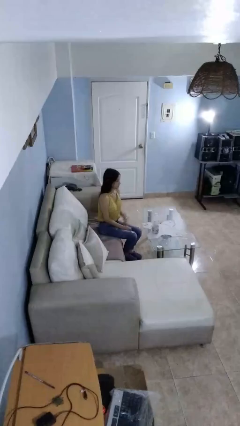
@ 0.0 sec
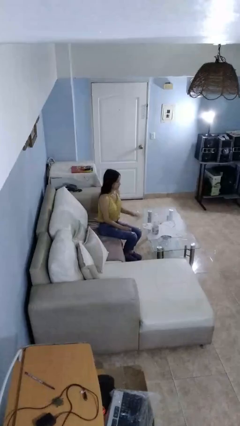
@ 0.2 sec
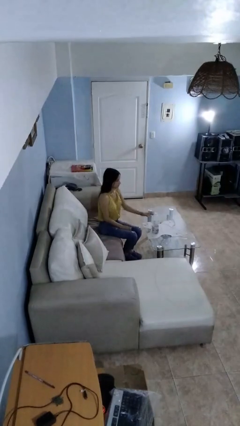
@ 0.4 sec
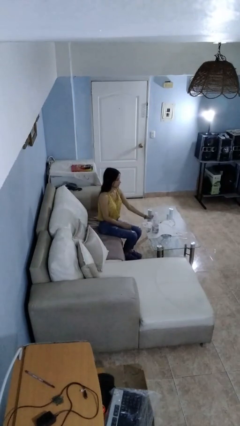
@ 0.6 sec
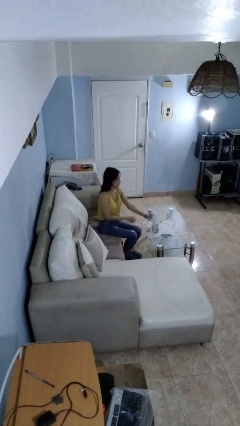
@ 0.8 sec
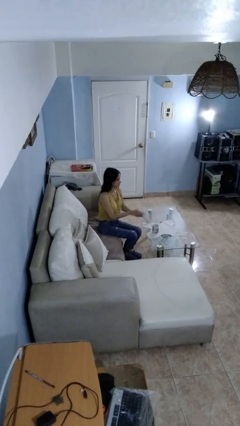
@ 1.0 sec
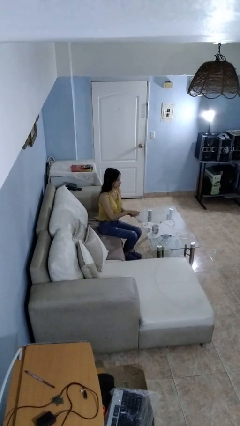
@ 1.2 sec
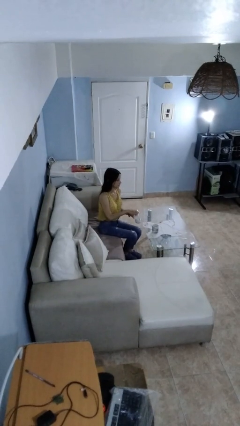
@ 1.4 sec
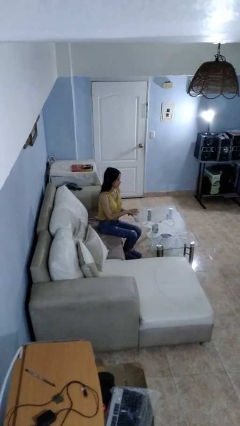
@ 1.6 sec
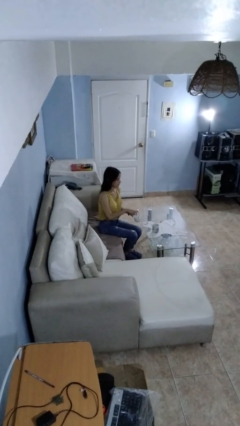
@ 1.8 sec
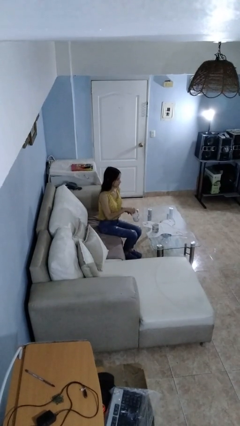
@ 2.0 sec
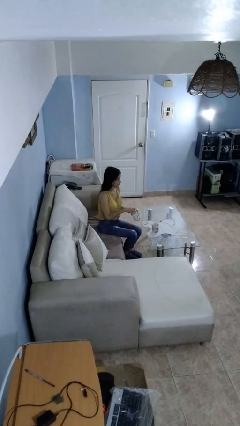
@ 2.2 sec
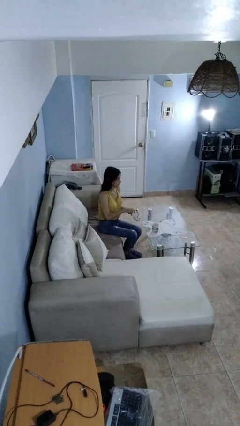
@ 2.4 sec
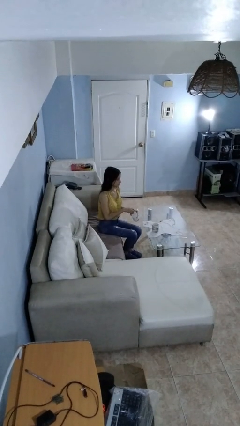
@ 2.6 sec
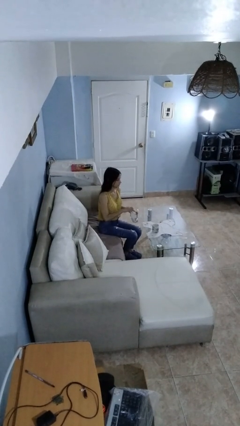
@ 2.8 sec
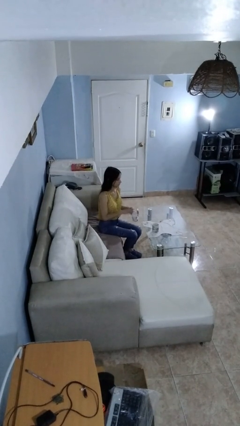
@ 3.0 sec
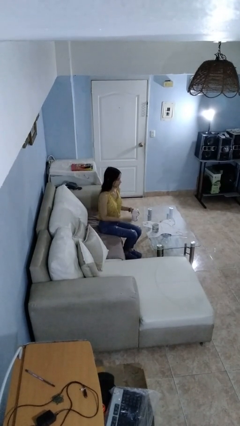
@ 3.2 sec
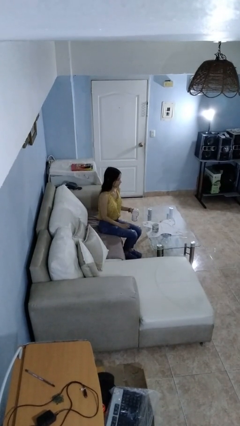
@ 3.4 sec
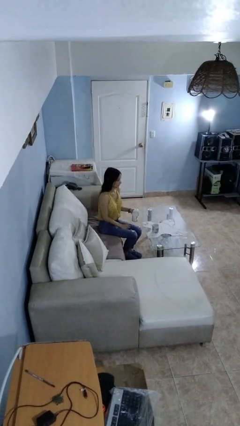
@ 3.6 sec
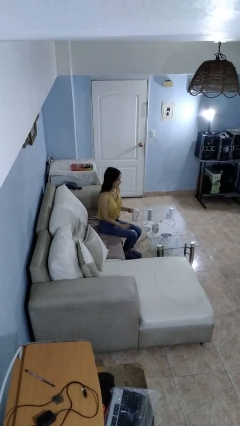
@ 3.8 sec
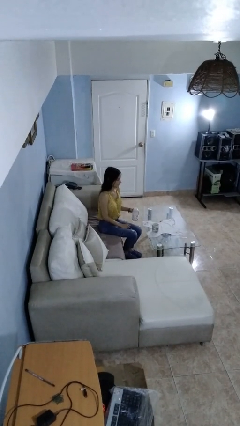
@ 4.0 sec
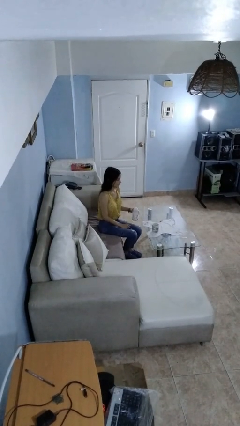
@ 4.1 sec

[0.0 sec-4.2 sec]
person unscrews lid from bottle
